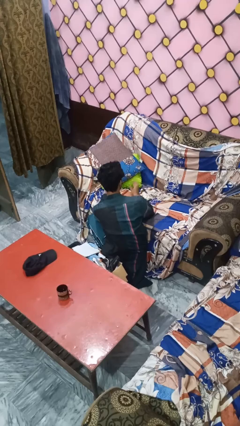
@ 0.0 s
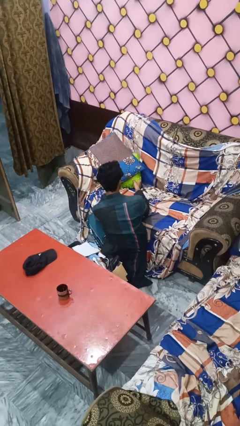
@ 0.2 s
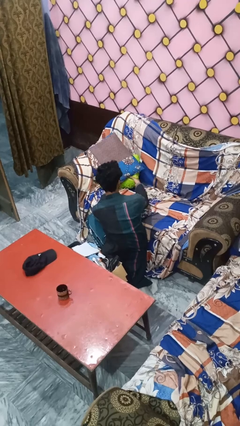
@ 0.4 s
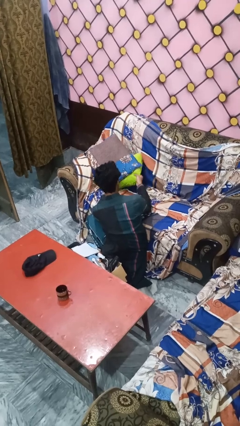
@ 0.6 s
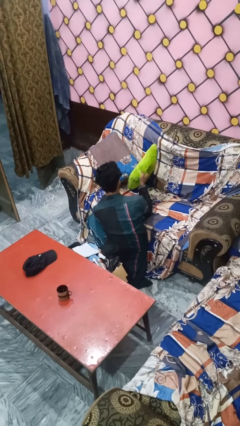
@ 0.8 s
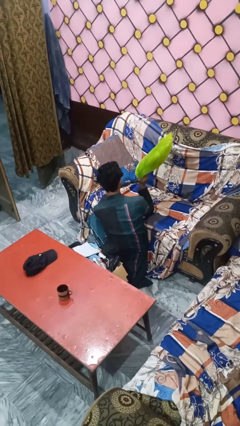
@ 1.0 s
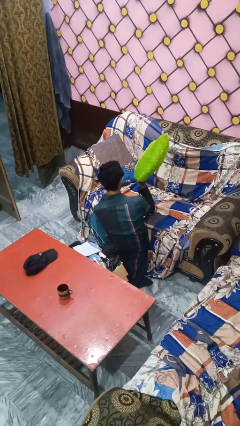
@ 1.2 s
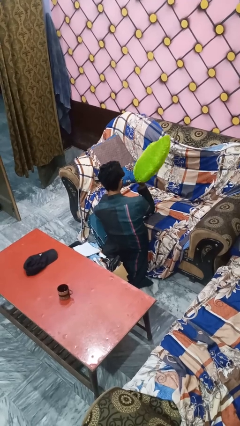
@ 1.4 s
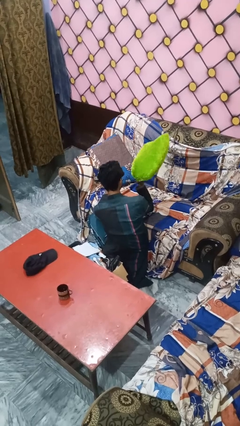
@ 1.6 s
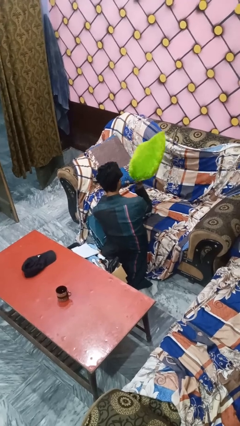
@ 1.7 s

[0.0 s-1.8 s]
person searches in couch

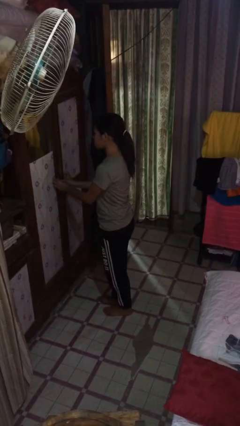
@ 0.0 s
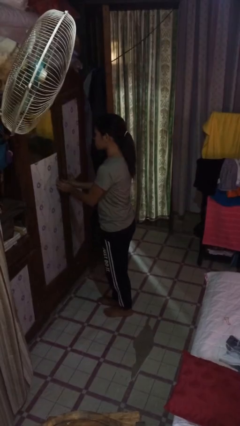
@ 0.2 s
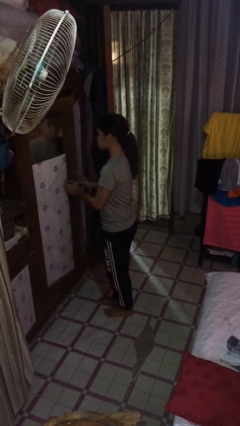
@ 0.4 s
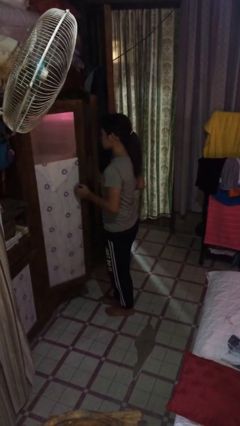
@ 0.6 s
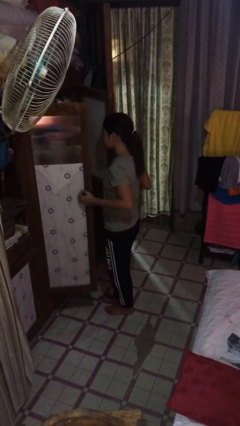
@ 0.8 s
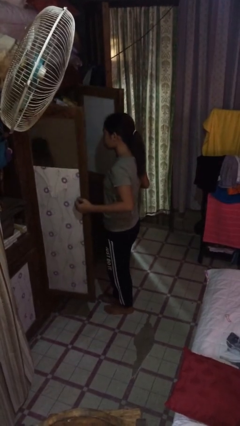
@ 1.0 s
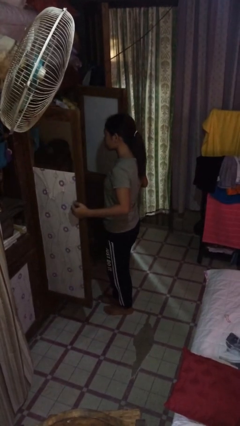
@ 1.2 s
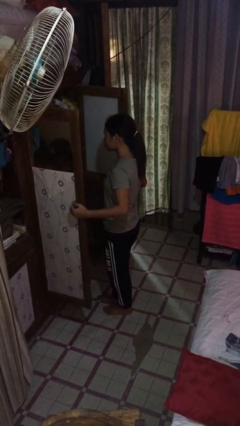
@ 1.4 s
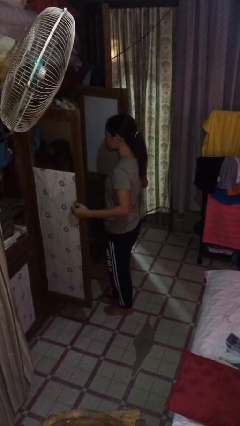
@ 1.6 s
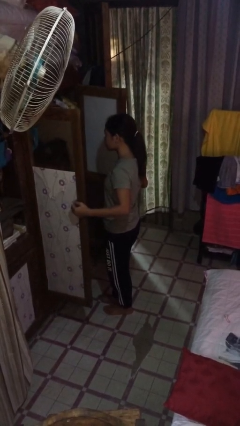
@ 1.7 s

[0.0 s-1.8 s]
person opens closet door

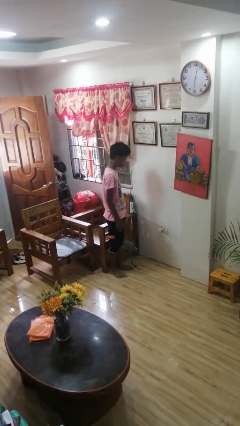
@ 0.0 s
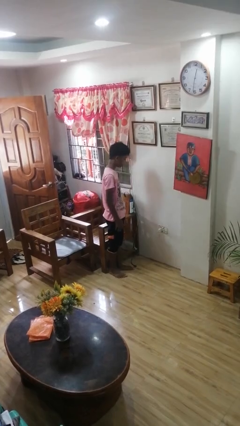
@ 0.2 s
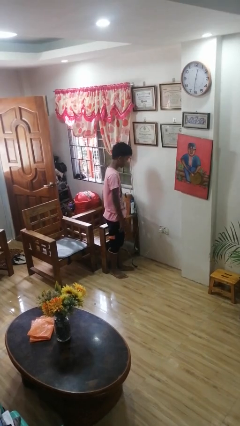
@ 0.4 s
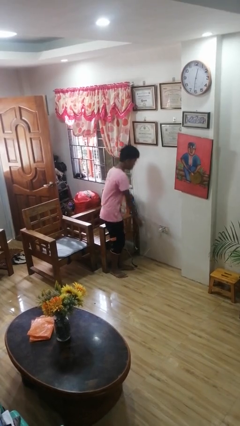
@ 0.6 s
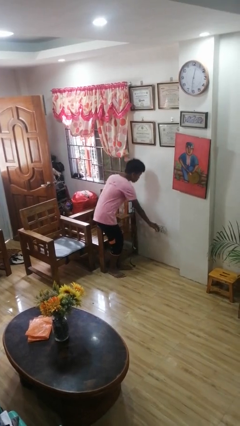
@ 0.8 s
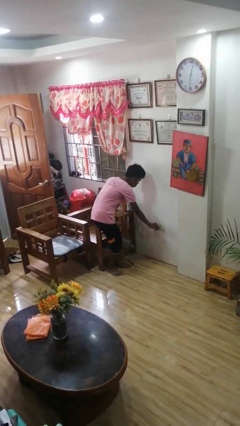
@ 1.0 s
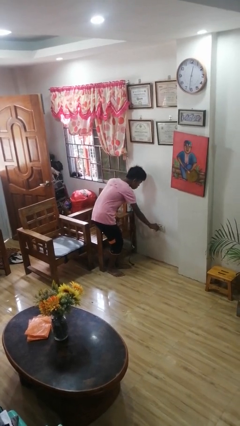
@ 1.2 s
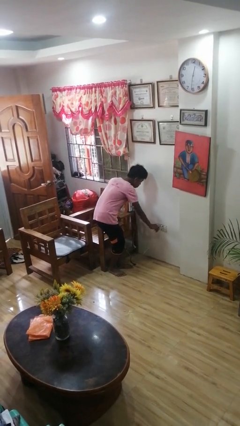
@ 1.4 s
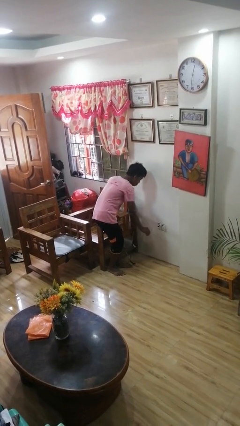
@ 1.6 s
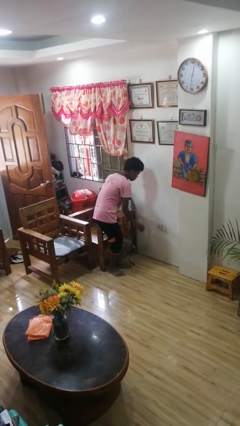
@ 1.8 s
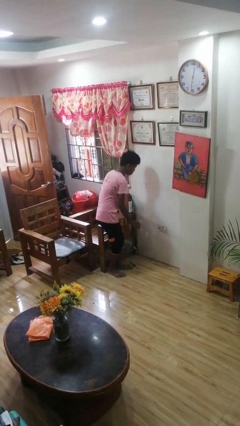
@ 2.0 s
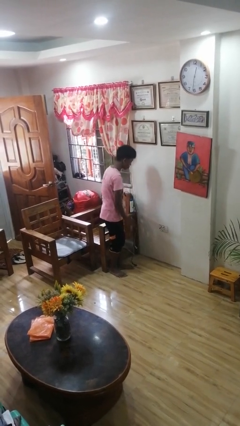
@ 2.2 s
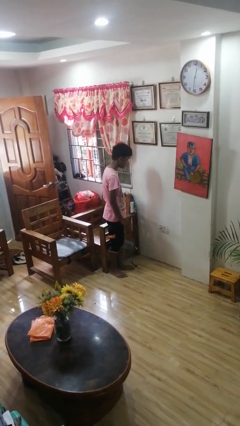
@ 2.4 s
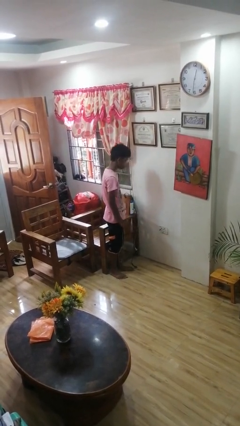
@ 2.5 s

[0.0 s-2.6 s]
person unplugs from electrical socket

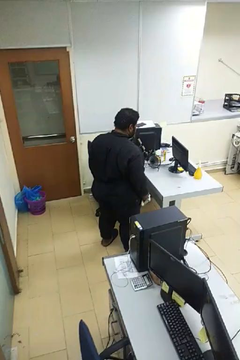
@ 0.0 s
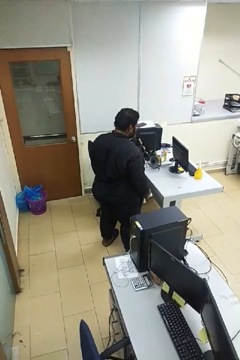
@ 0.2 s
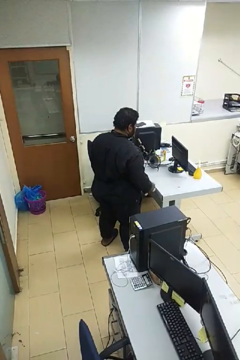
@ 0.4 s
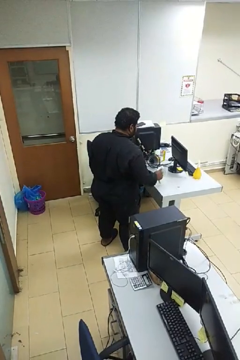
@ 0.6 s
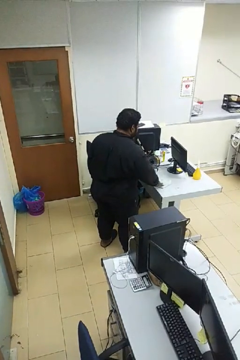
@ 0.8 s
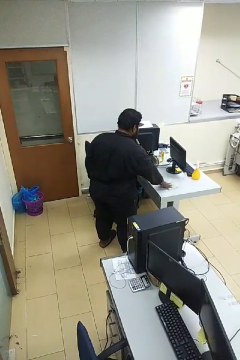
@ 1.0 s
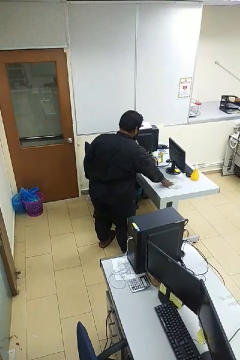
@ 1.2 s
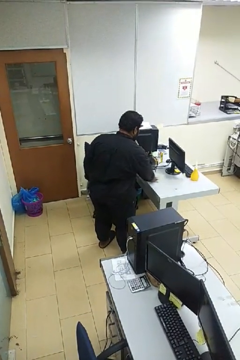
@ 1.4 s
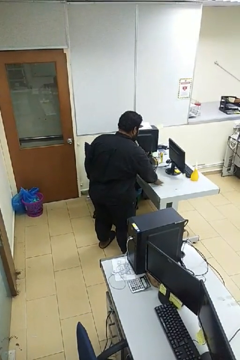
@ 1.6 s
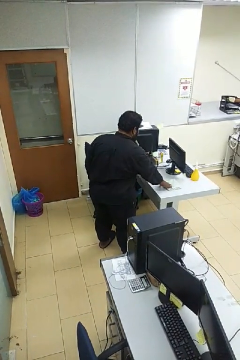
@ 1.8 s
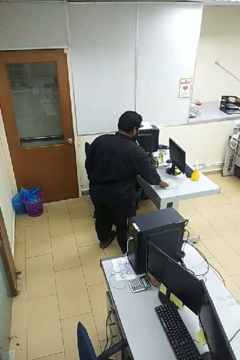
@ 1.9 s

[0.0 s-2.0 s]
person cleans table with rag

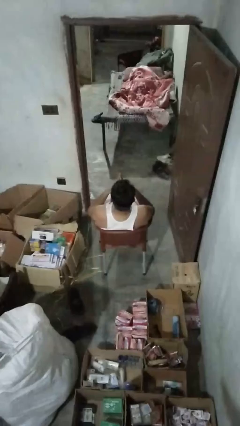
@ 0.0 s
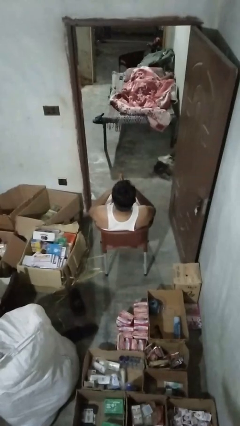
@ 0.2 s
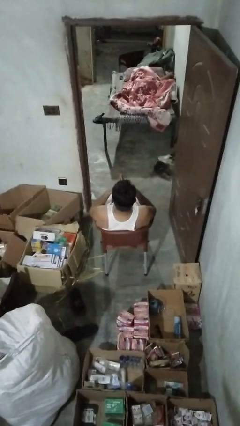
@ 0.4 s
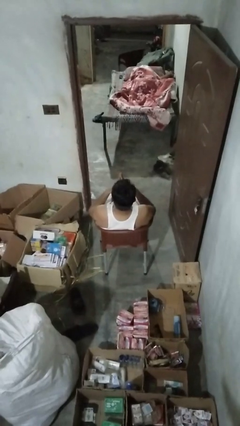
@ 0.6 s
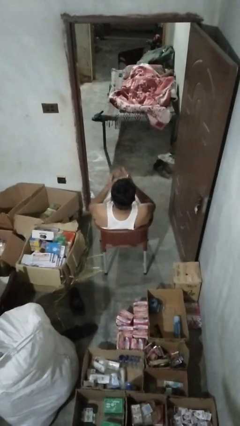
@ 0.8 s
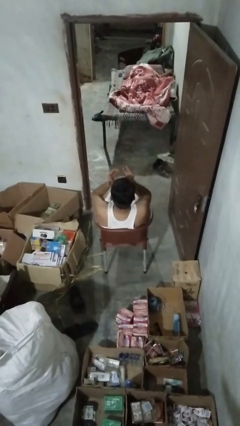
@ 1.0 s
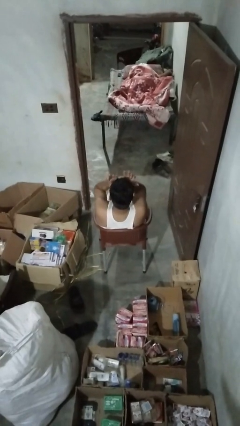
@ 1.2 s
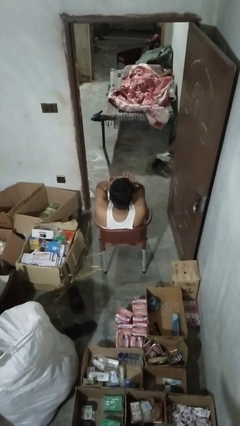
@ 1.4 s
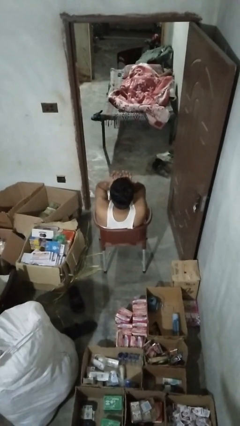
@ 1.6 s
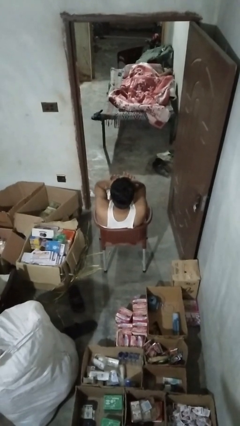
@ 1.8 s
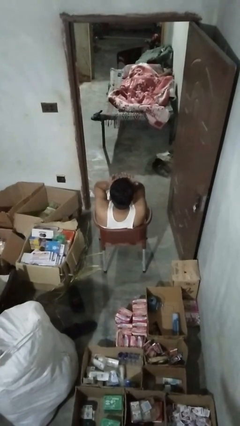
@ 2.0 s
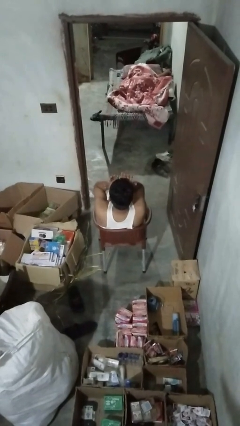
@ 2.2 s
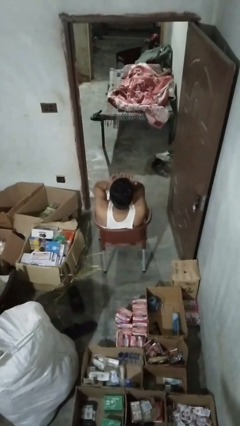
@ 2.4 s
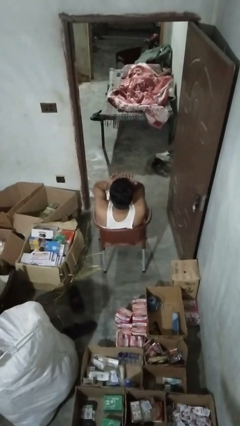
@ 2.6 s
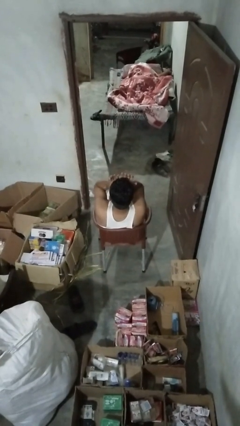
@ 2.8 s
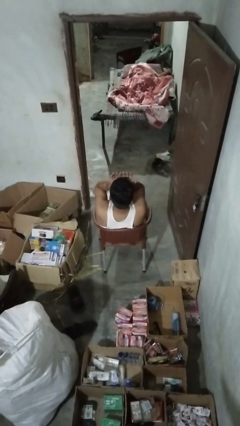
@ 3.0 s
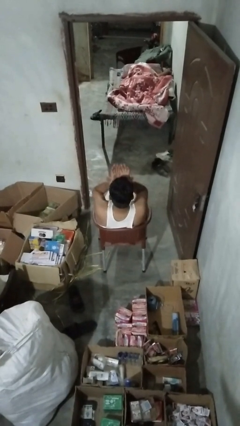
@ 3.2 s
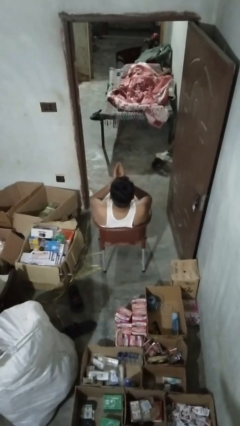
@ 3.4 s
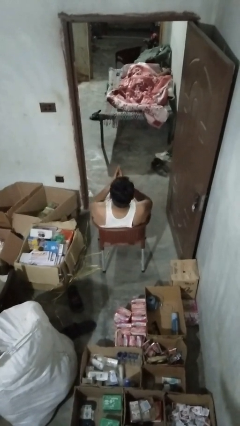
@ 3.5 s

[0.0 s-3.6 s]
person rubs eyes

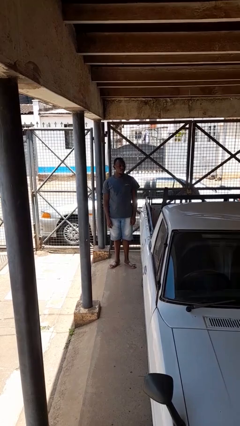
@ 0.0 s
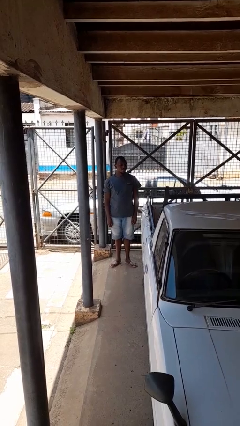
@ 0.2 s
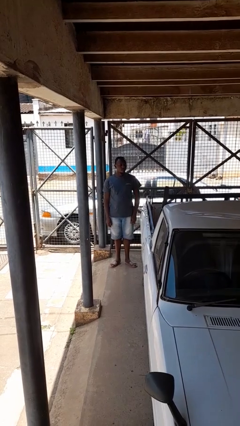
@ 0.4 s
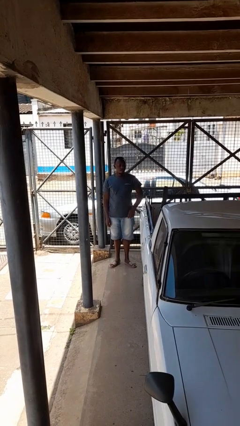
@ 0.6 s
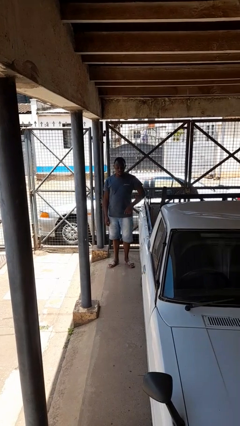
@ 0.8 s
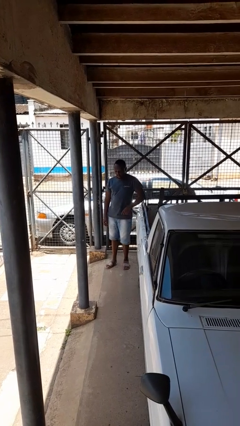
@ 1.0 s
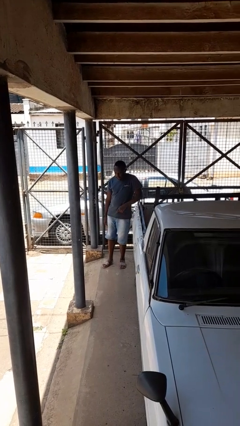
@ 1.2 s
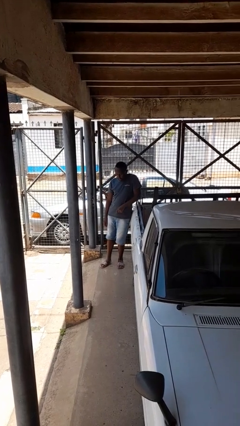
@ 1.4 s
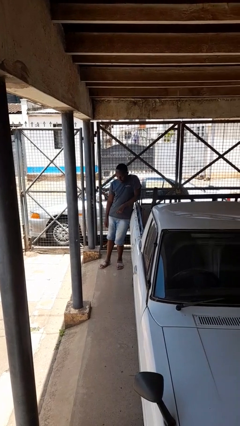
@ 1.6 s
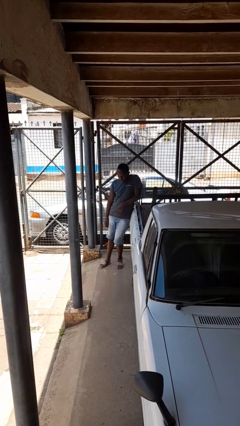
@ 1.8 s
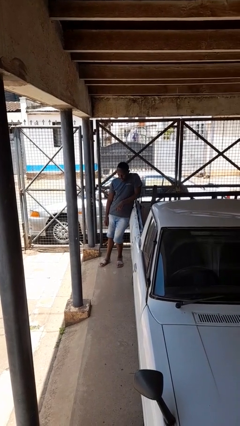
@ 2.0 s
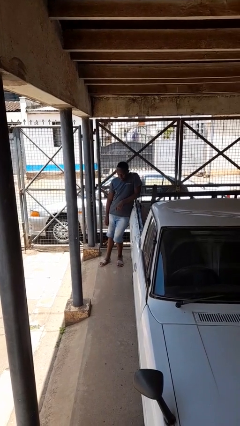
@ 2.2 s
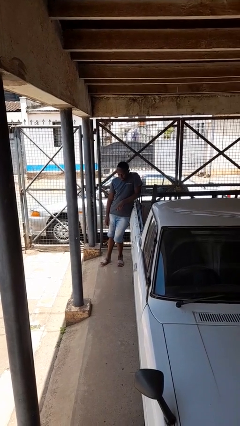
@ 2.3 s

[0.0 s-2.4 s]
person leans against car

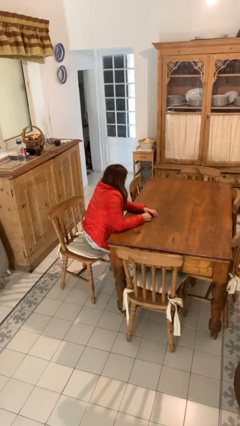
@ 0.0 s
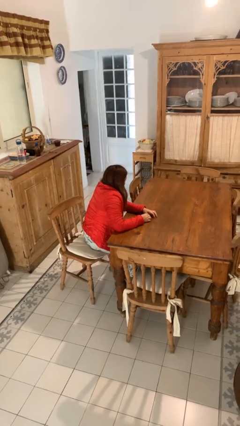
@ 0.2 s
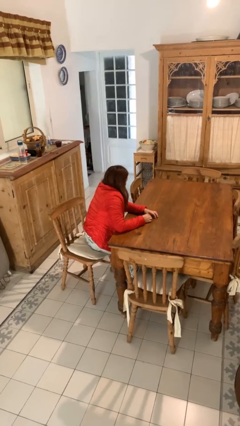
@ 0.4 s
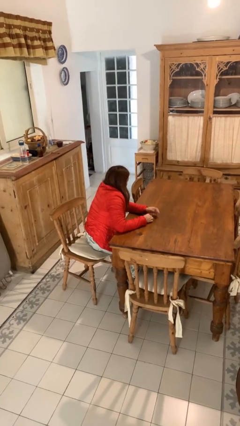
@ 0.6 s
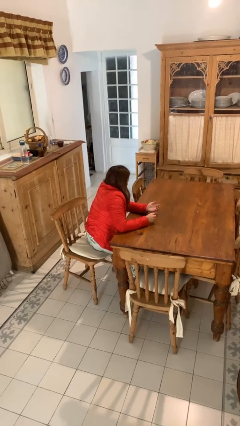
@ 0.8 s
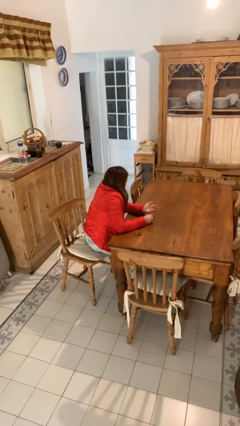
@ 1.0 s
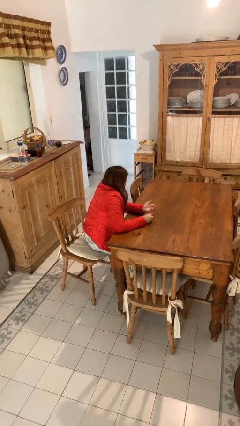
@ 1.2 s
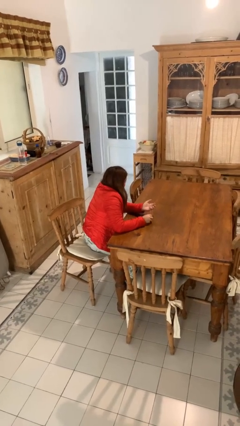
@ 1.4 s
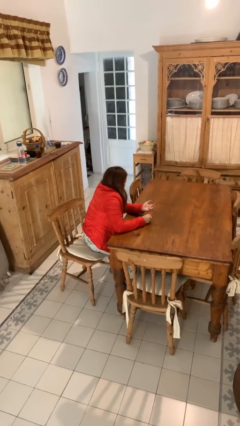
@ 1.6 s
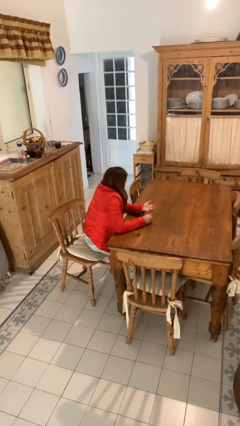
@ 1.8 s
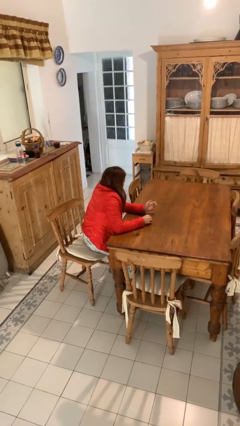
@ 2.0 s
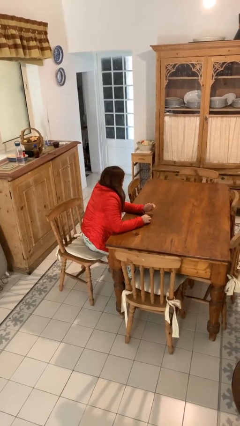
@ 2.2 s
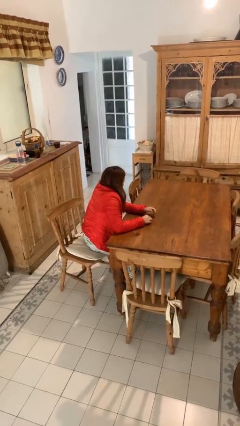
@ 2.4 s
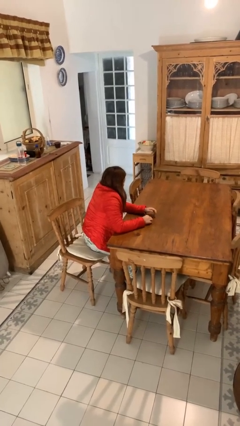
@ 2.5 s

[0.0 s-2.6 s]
person files fingernails
